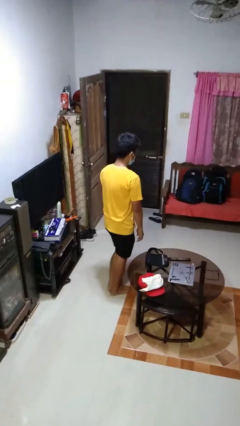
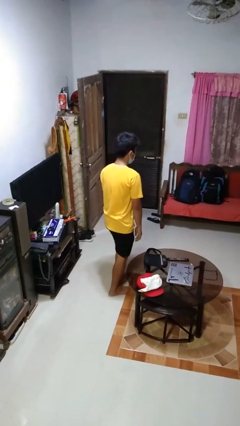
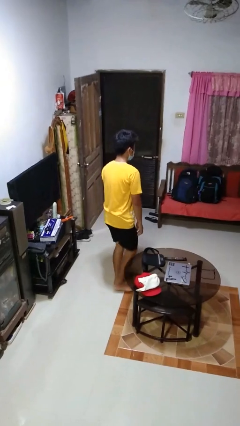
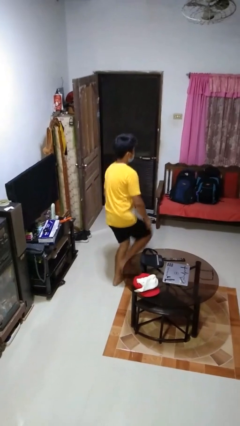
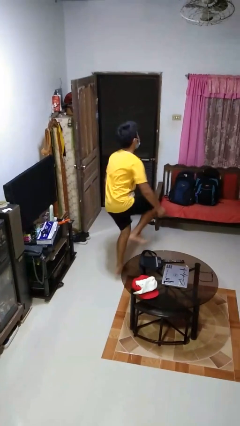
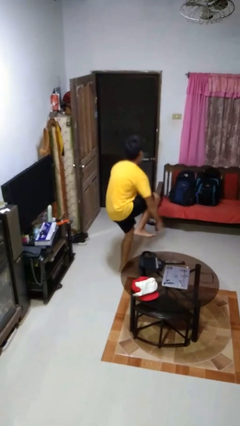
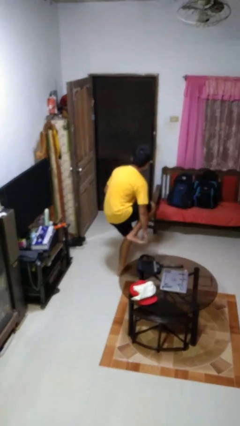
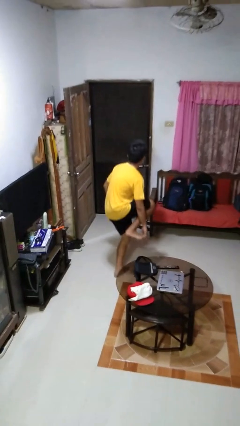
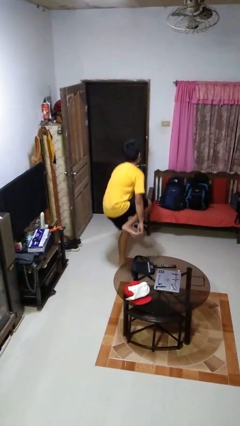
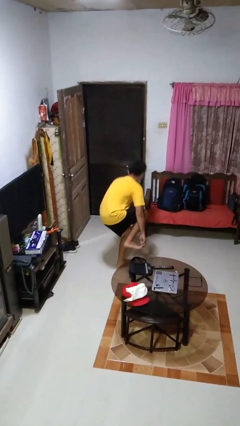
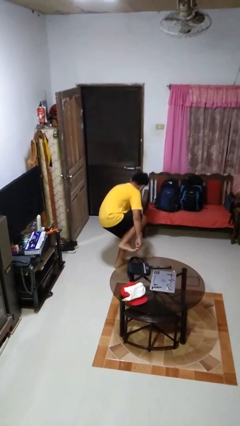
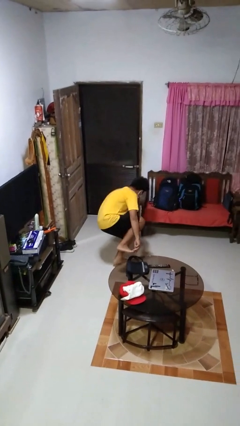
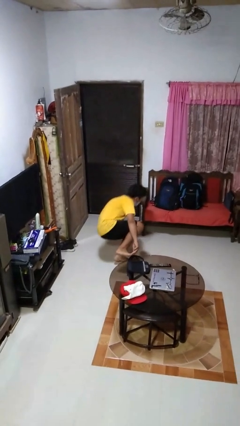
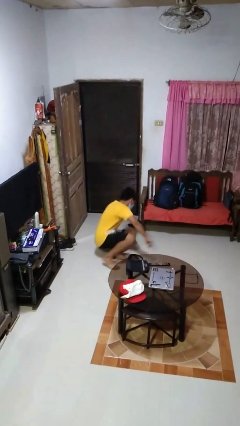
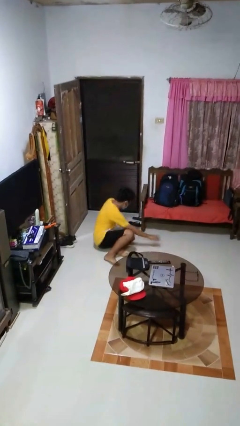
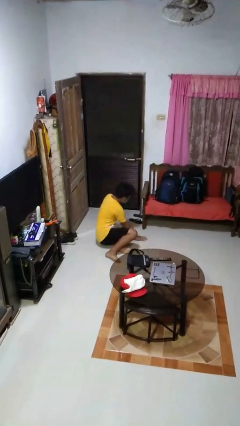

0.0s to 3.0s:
person trips on object on floor

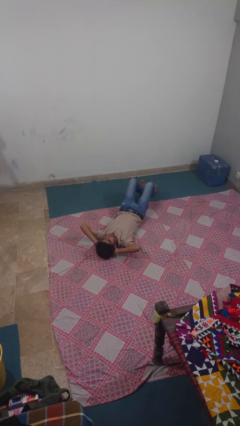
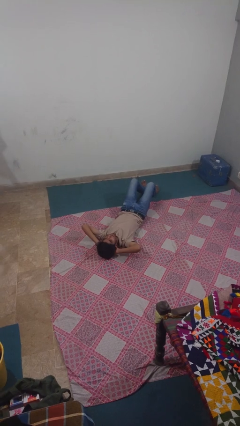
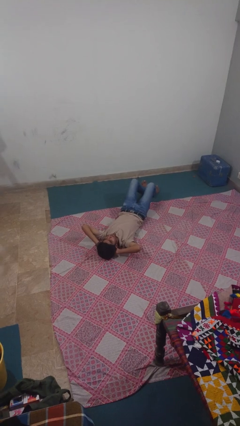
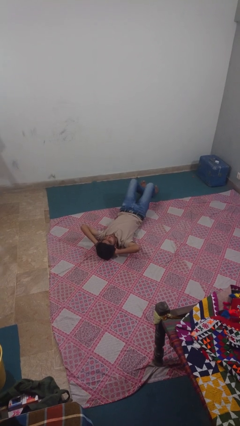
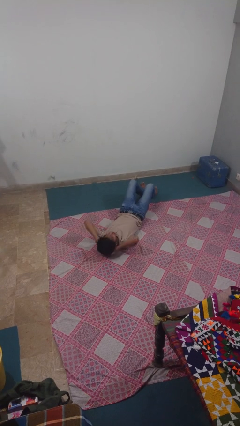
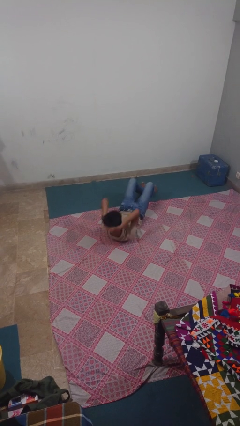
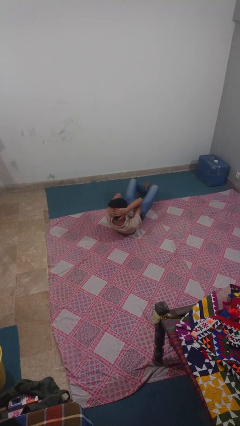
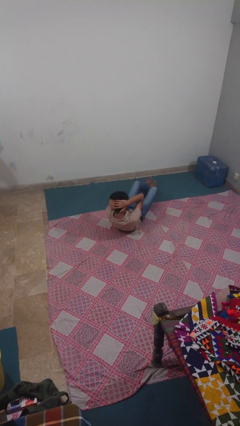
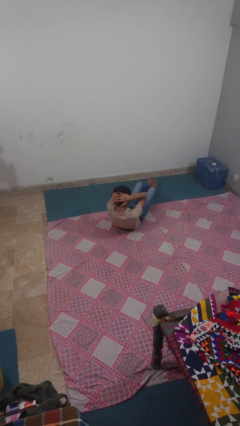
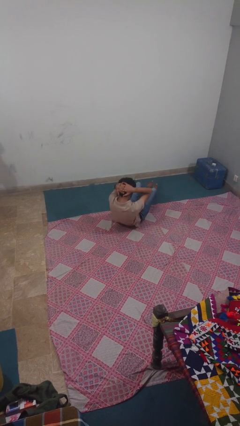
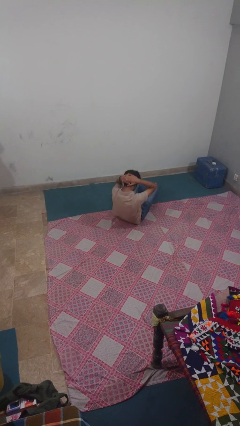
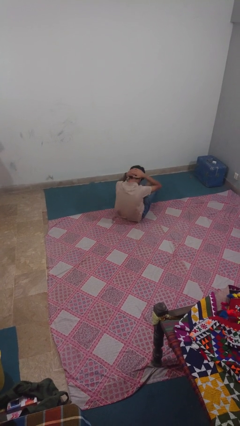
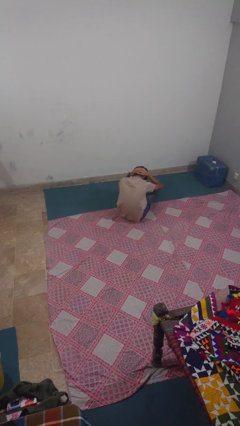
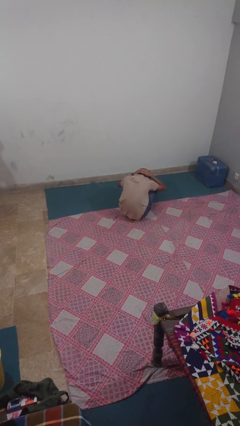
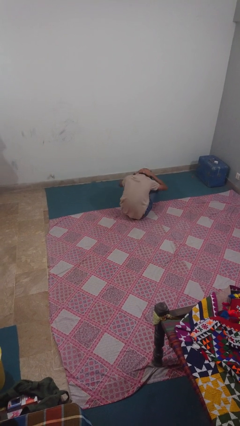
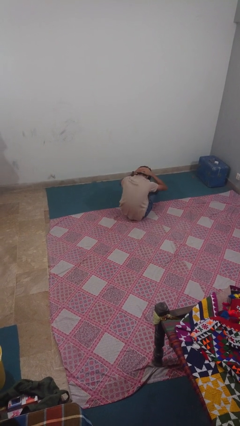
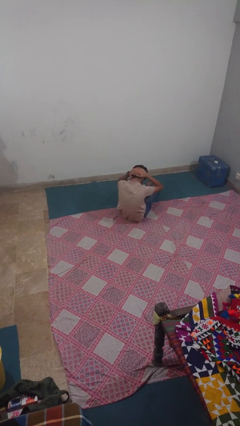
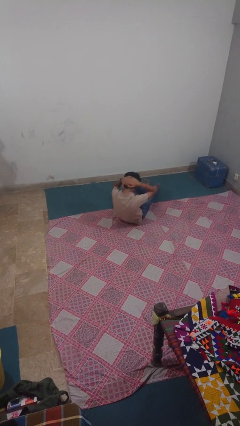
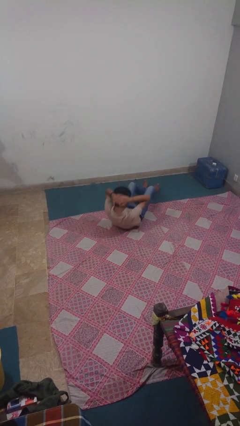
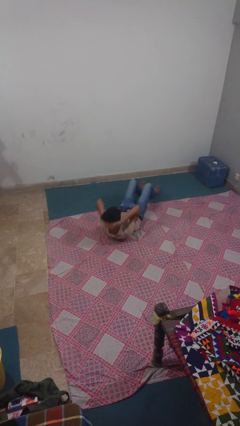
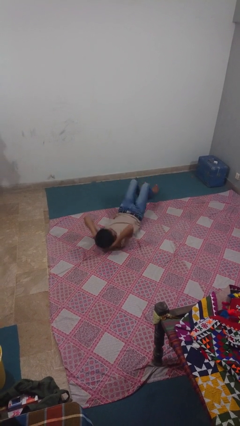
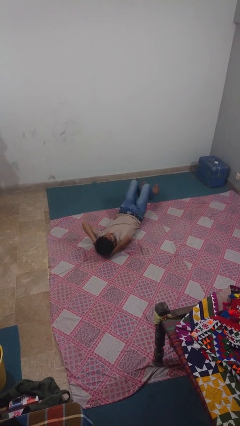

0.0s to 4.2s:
person exercises with situp

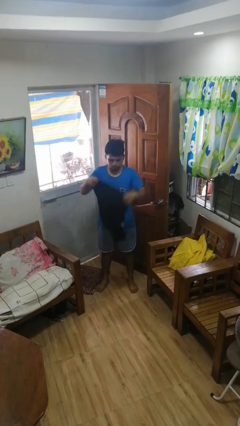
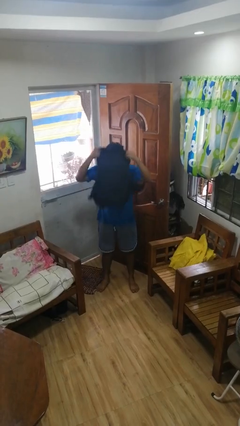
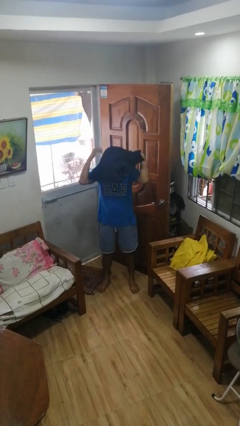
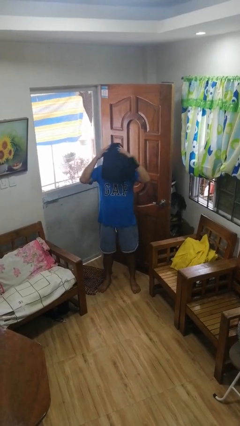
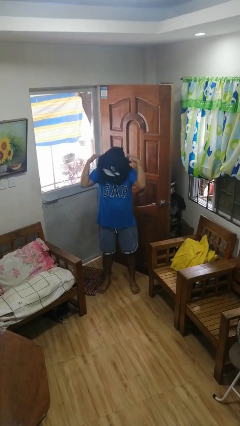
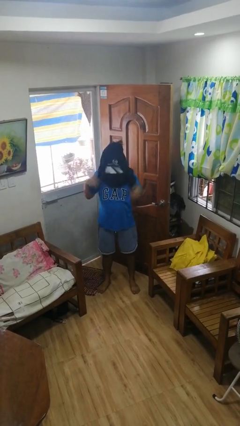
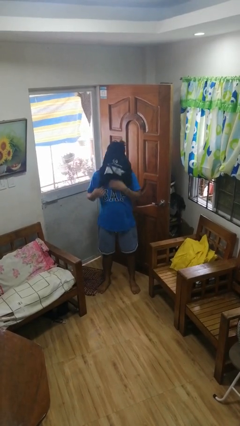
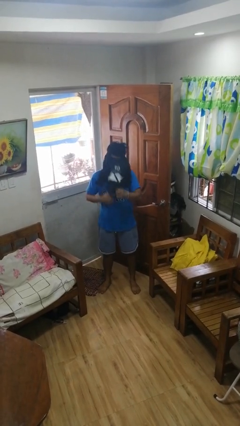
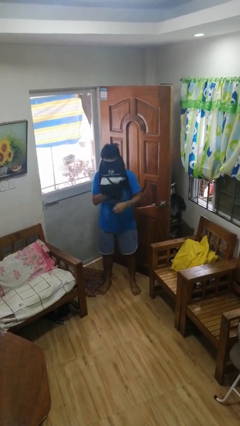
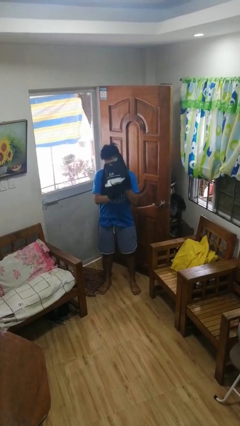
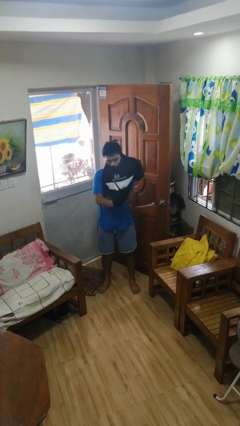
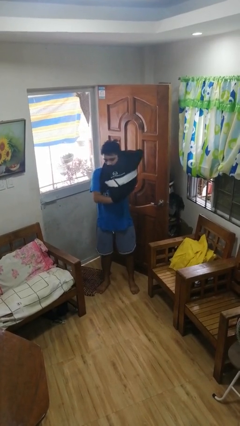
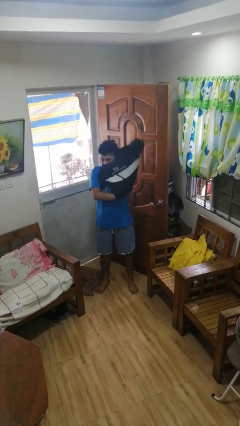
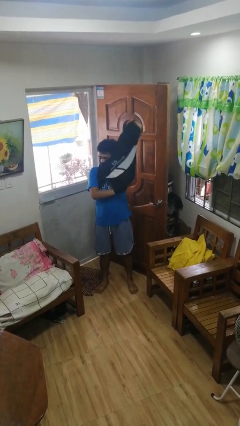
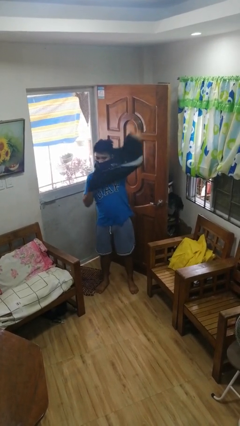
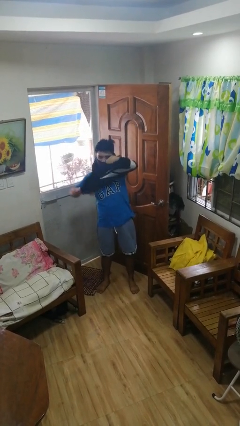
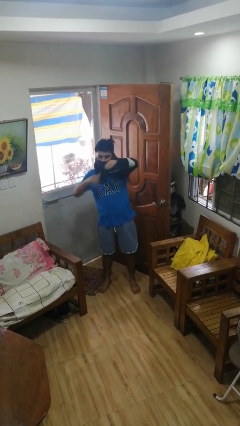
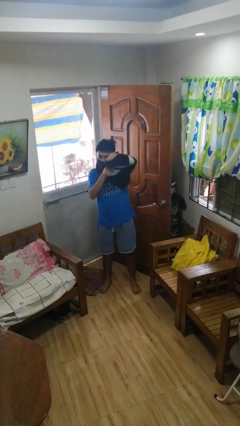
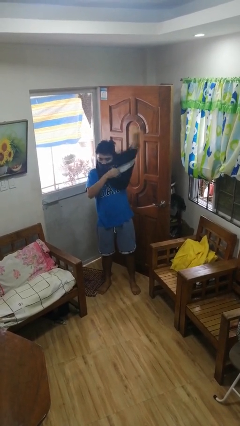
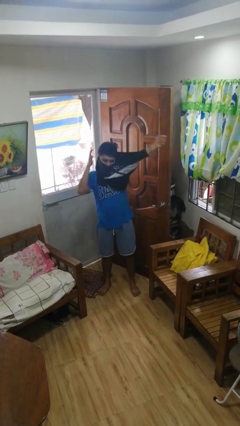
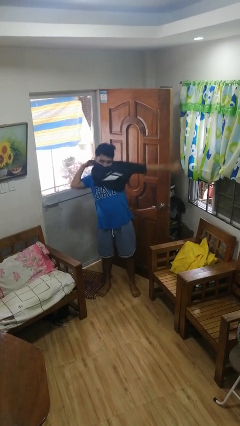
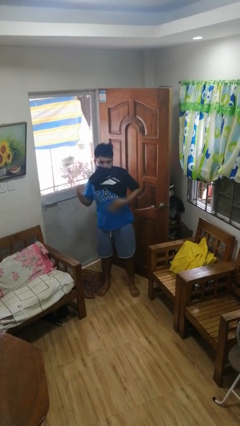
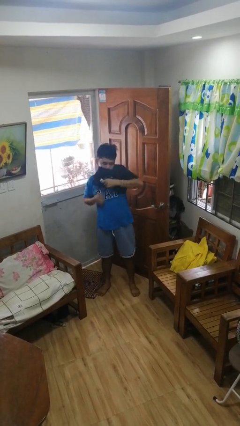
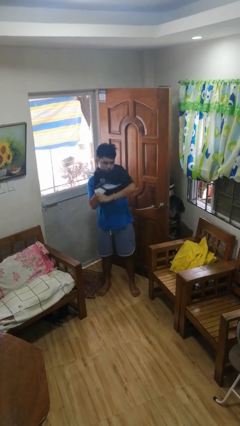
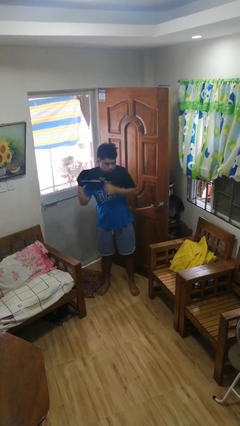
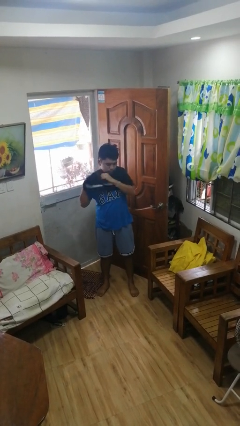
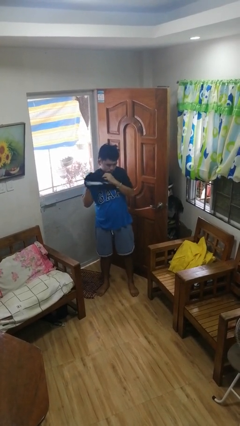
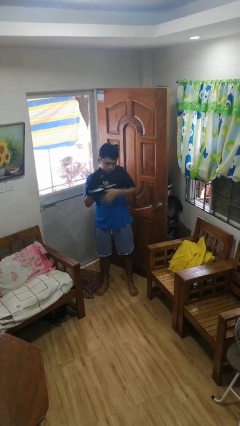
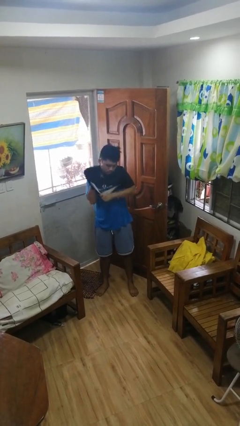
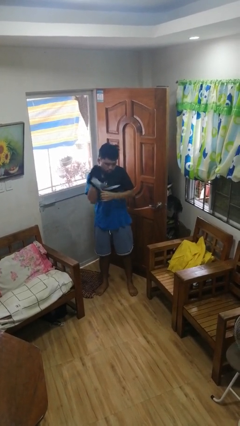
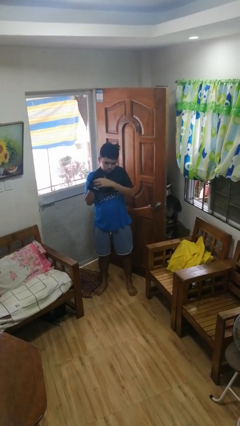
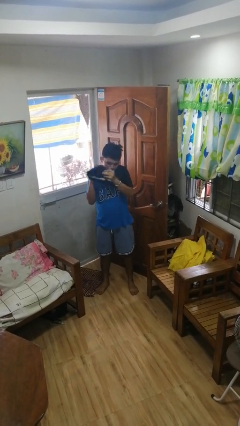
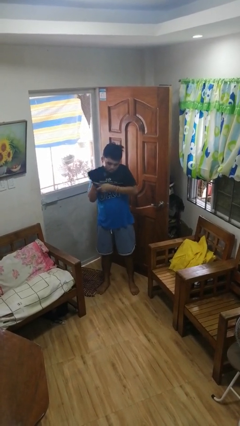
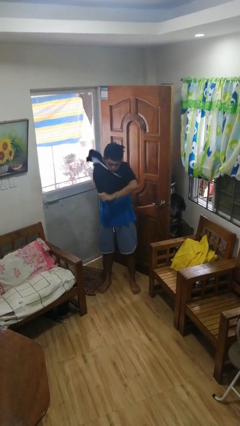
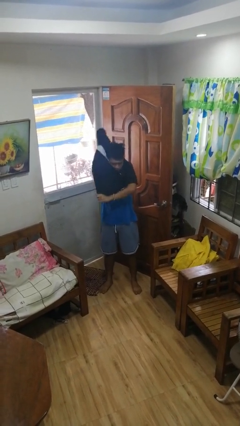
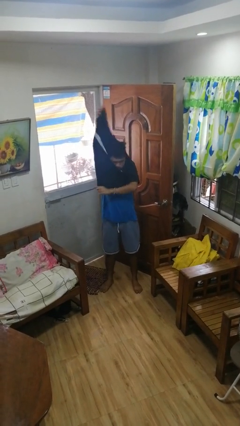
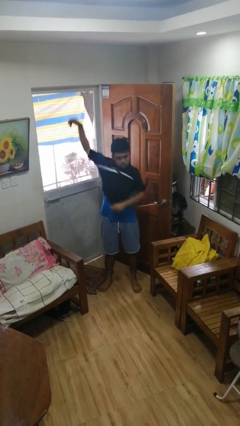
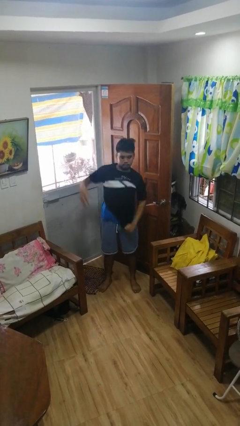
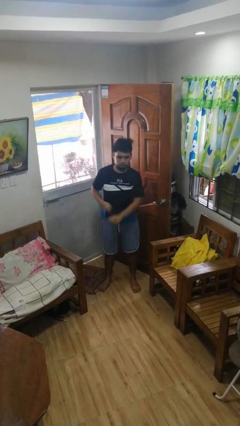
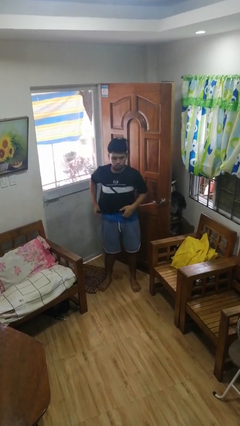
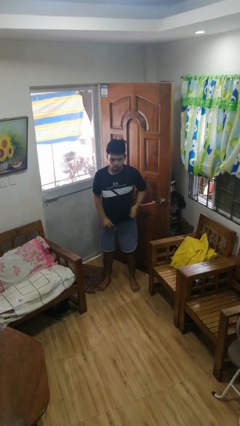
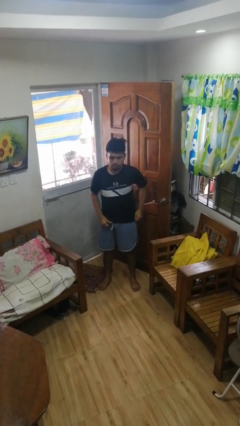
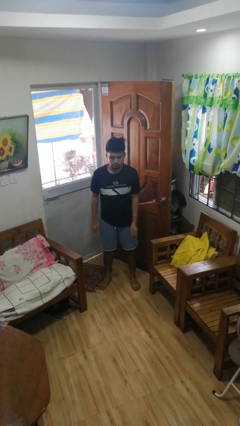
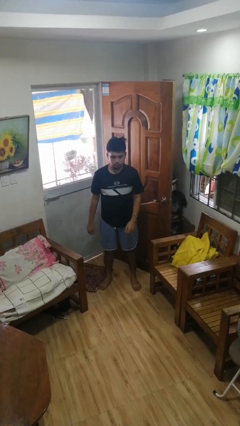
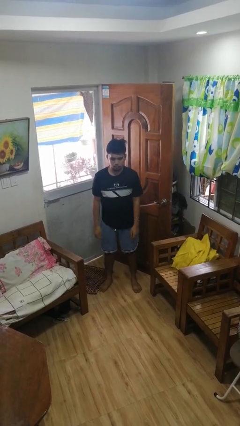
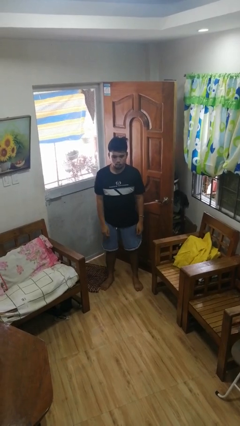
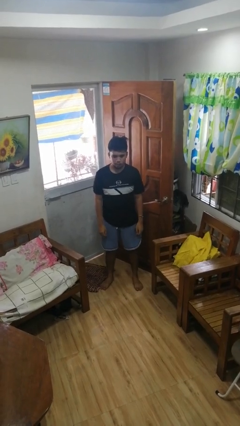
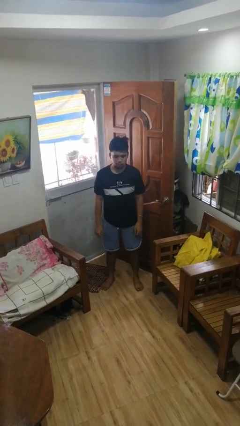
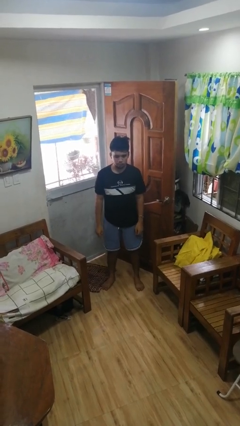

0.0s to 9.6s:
person puts on shirt

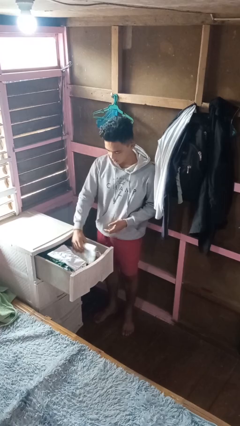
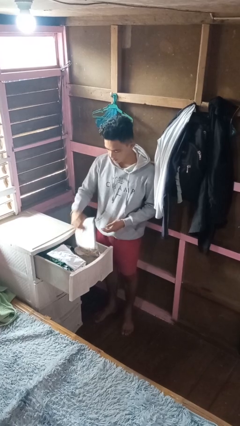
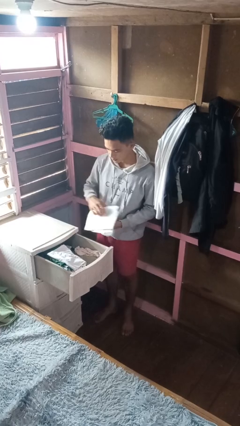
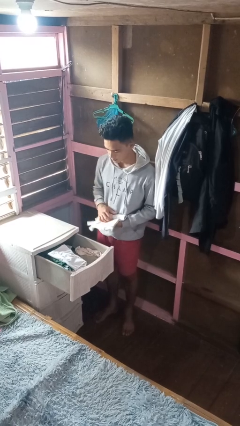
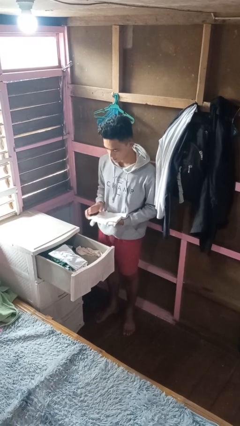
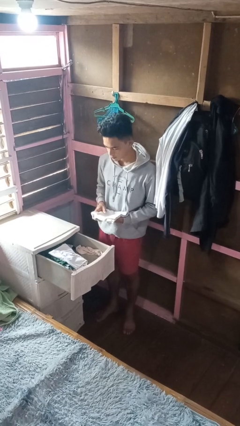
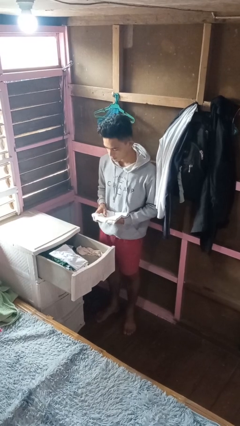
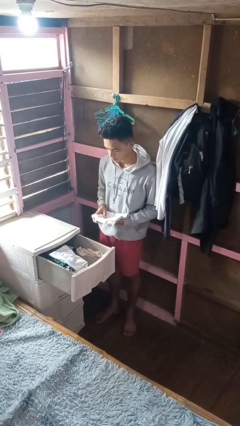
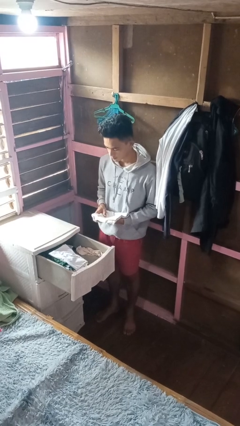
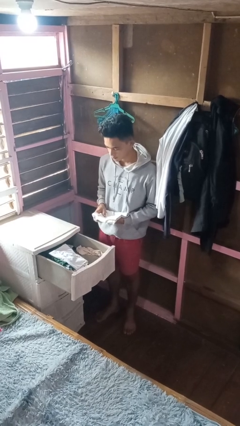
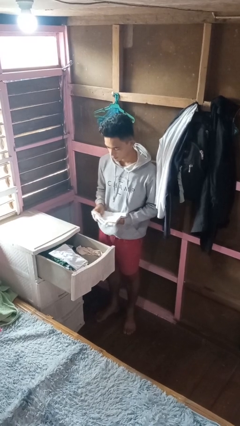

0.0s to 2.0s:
person takes clothes from dresser
